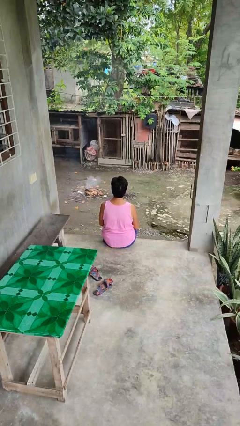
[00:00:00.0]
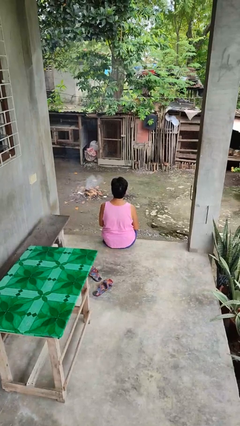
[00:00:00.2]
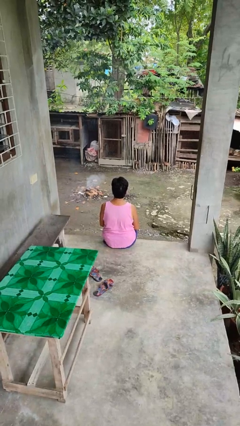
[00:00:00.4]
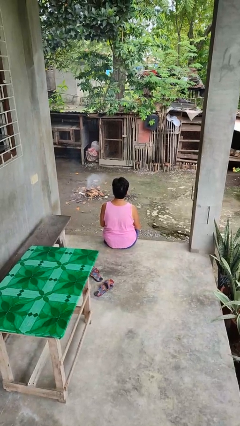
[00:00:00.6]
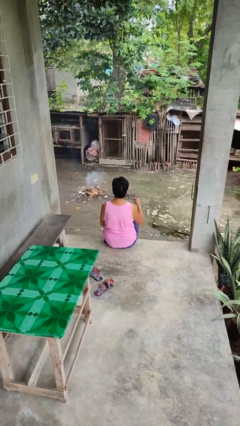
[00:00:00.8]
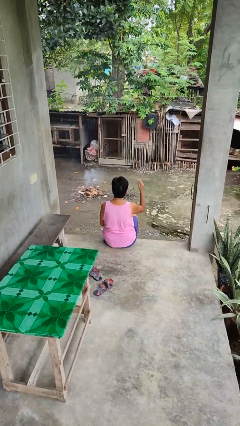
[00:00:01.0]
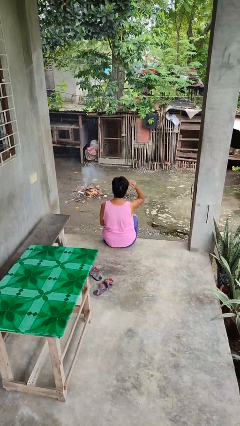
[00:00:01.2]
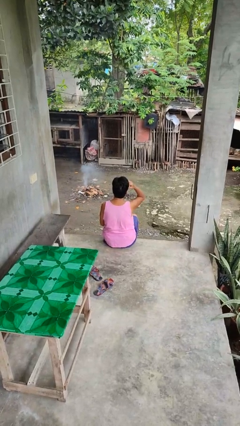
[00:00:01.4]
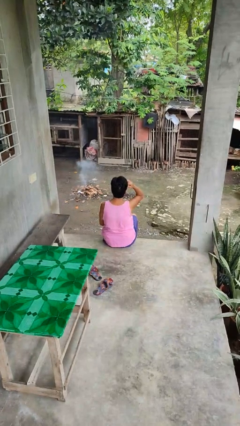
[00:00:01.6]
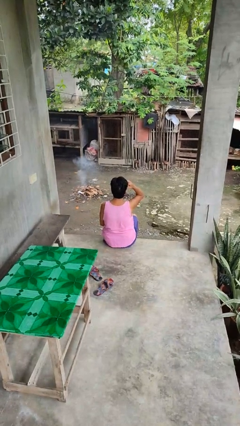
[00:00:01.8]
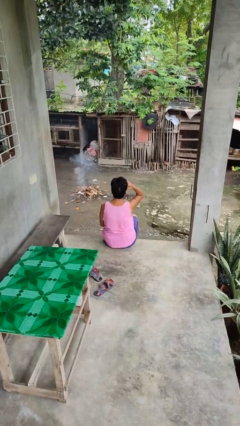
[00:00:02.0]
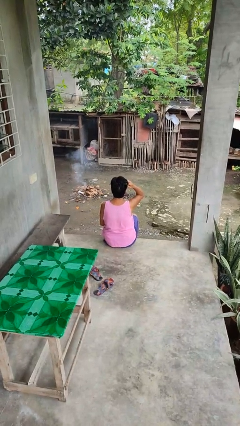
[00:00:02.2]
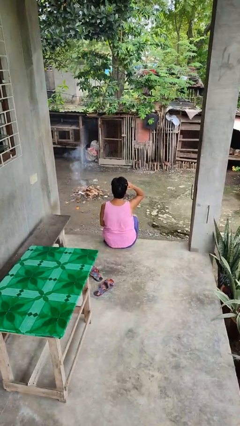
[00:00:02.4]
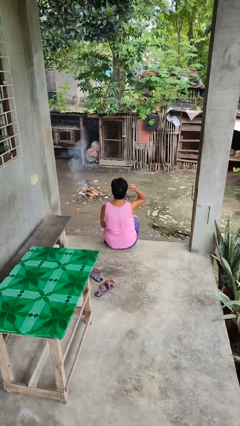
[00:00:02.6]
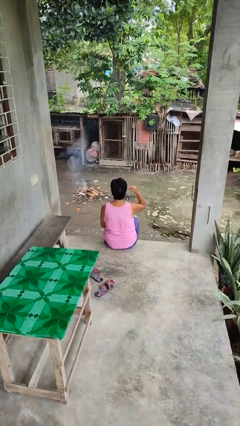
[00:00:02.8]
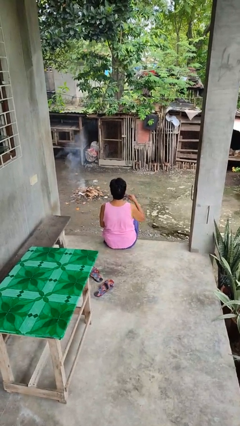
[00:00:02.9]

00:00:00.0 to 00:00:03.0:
person scratches face

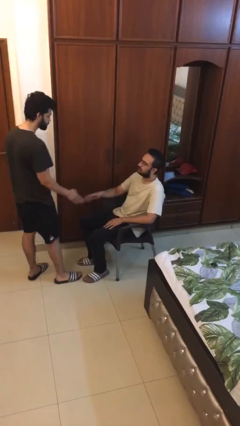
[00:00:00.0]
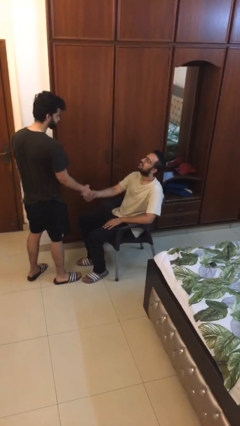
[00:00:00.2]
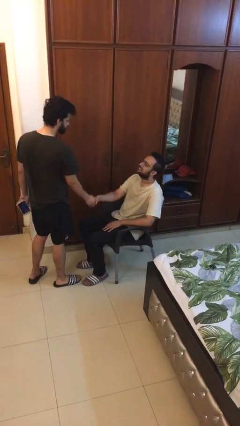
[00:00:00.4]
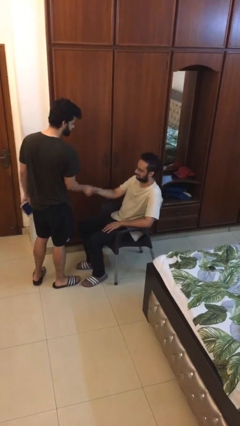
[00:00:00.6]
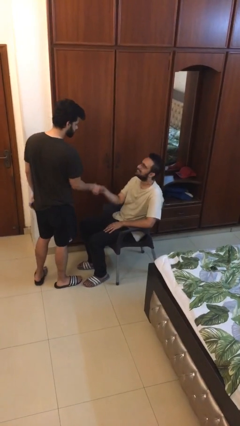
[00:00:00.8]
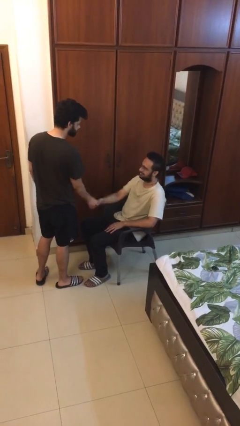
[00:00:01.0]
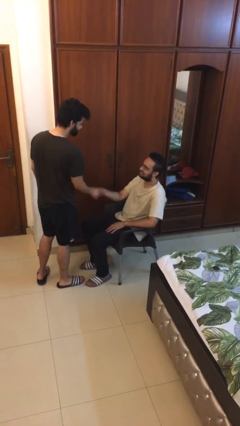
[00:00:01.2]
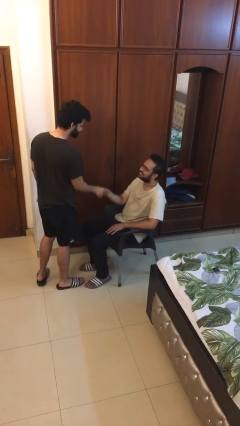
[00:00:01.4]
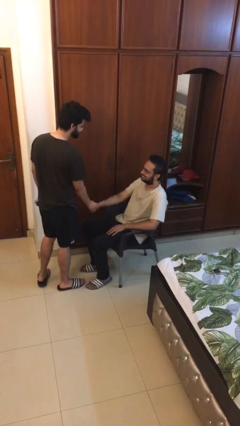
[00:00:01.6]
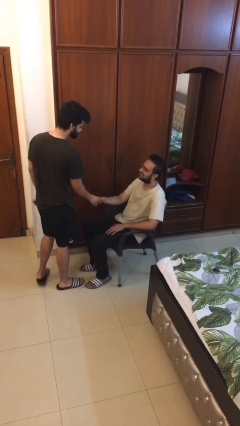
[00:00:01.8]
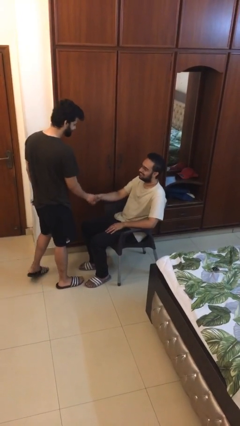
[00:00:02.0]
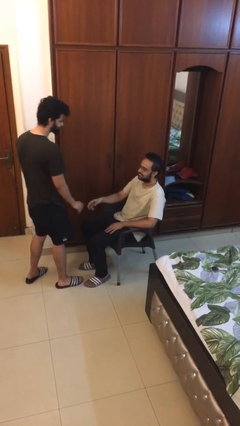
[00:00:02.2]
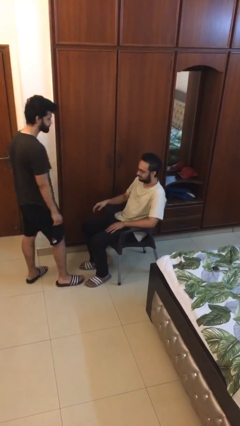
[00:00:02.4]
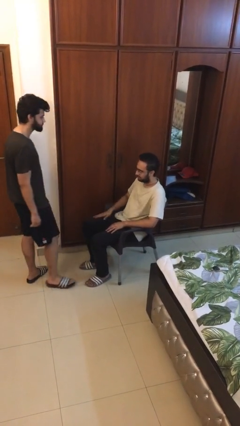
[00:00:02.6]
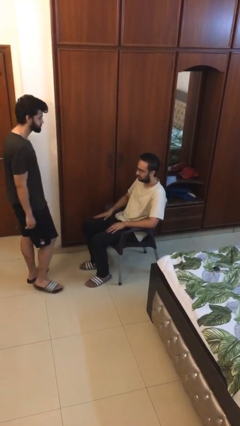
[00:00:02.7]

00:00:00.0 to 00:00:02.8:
person shakes hand

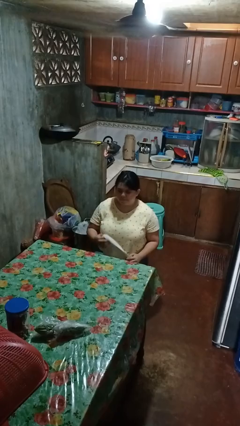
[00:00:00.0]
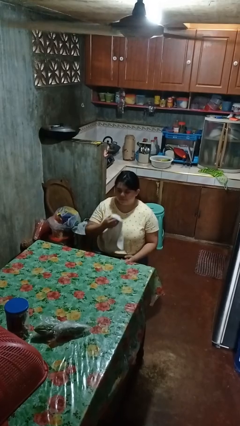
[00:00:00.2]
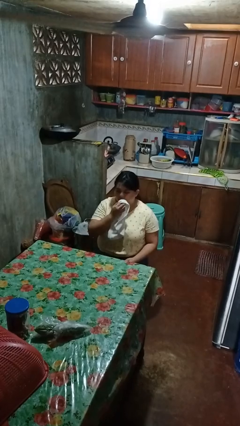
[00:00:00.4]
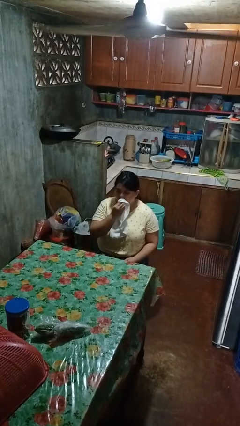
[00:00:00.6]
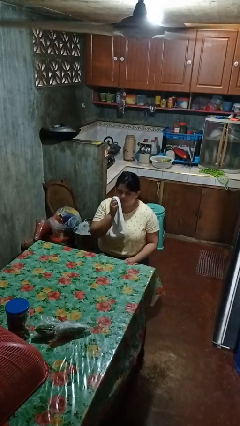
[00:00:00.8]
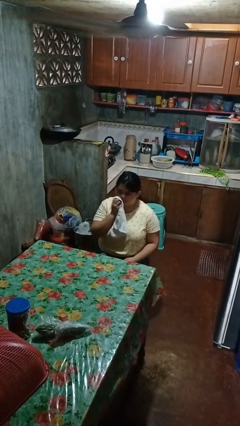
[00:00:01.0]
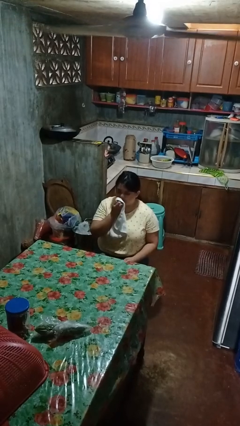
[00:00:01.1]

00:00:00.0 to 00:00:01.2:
person wipes mouth with napkin

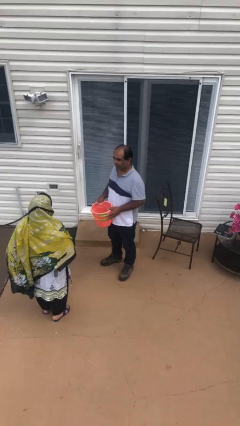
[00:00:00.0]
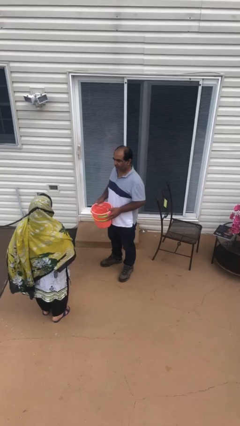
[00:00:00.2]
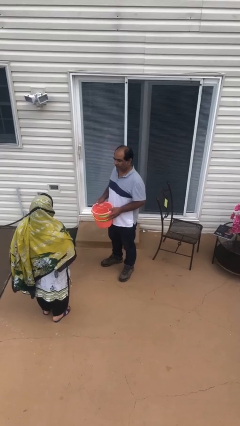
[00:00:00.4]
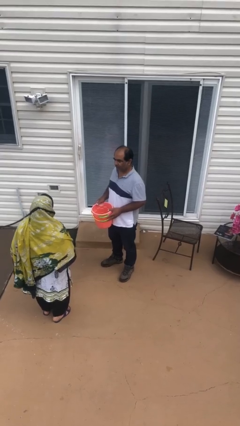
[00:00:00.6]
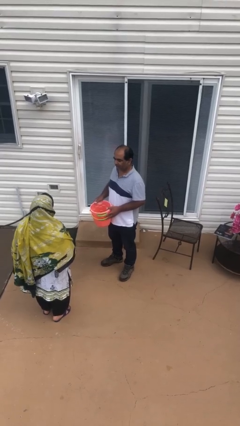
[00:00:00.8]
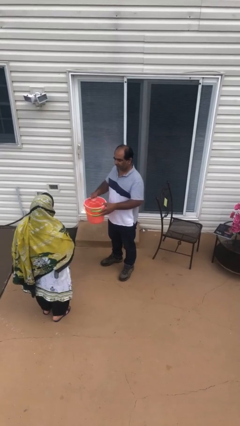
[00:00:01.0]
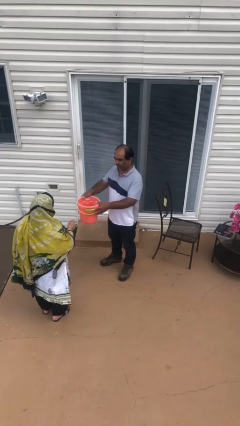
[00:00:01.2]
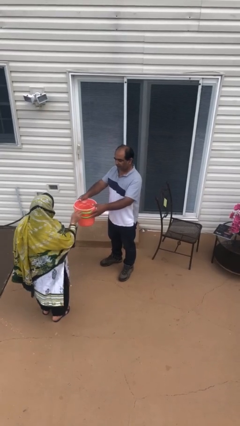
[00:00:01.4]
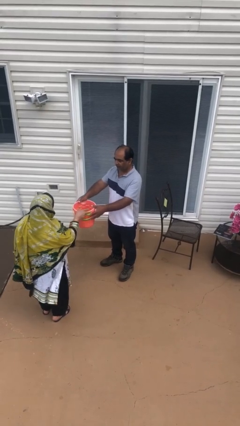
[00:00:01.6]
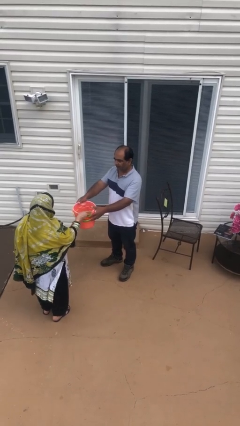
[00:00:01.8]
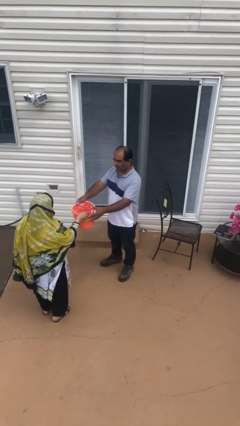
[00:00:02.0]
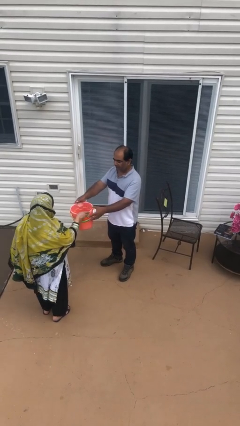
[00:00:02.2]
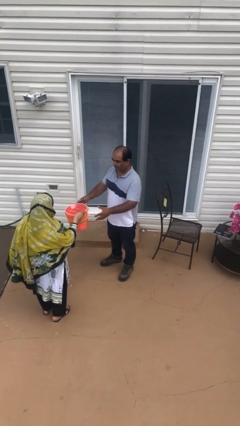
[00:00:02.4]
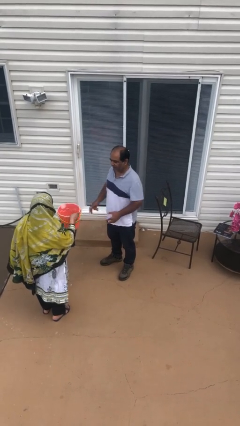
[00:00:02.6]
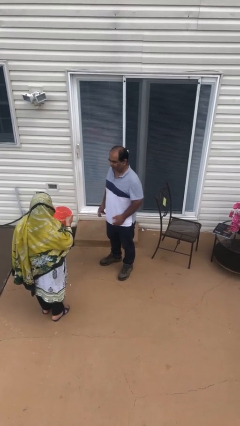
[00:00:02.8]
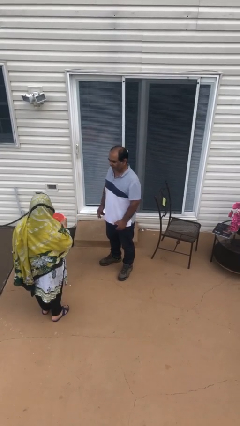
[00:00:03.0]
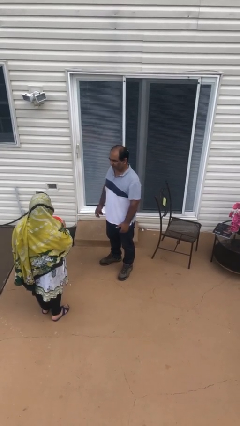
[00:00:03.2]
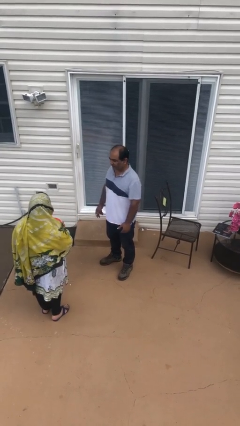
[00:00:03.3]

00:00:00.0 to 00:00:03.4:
person transfers object to person

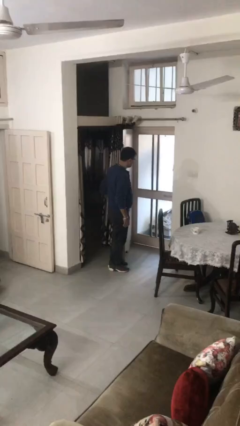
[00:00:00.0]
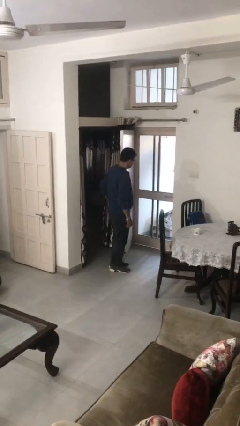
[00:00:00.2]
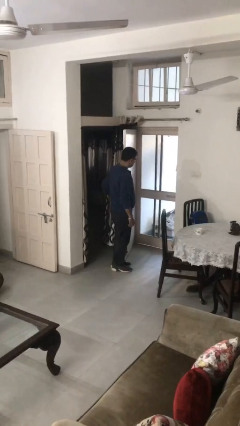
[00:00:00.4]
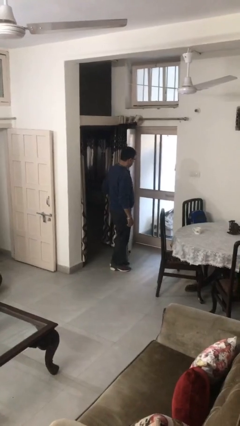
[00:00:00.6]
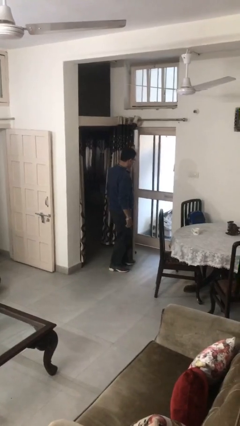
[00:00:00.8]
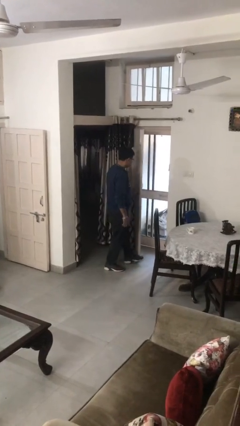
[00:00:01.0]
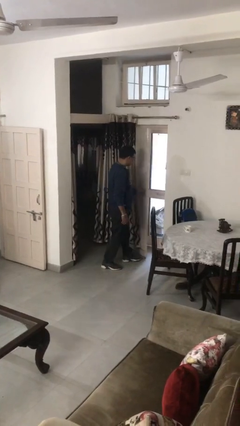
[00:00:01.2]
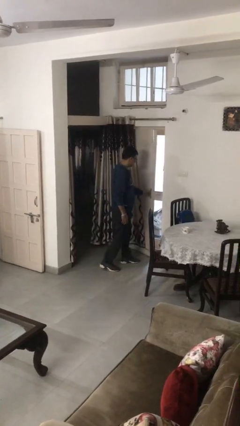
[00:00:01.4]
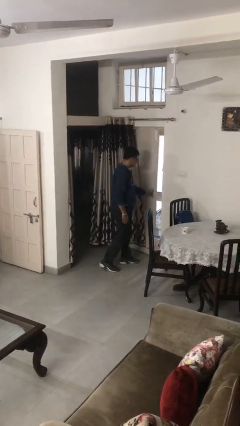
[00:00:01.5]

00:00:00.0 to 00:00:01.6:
person closes facility door

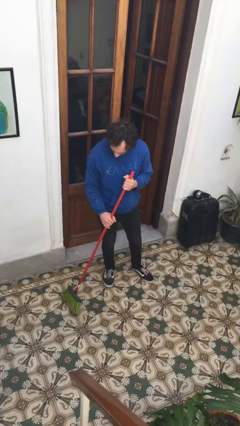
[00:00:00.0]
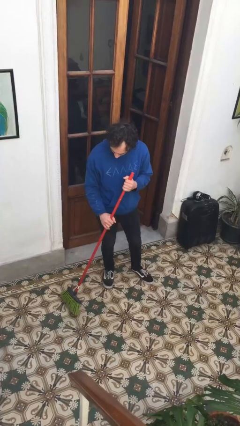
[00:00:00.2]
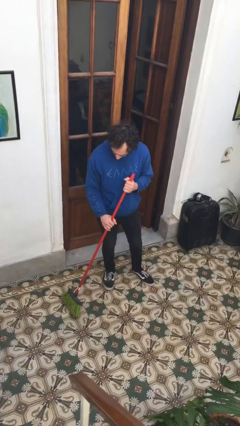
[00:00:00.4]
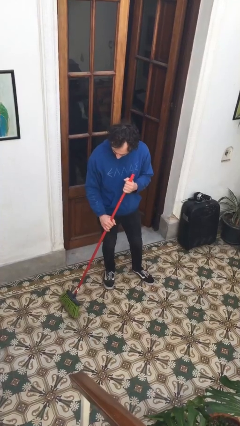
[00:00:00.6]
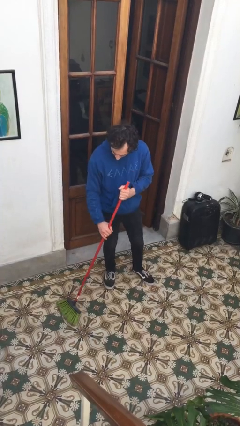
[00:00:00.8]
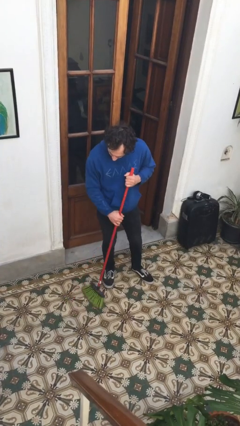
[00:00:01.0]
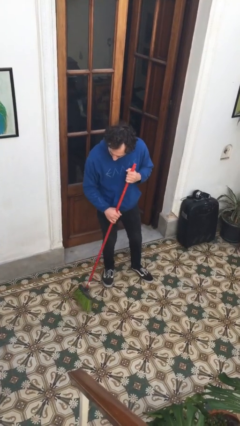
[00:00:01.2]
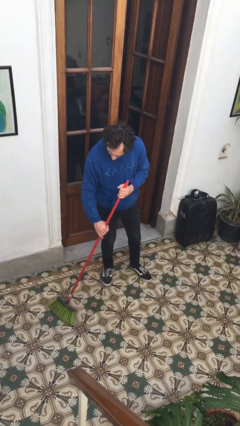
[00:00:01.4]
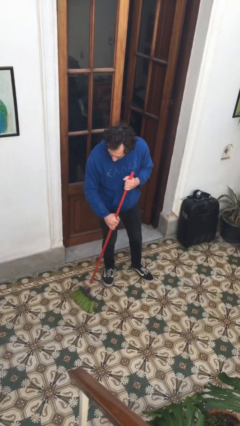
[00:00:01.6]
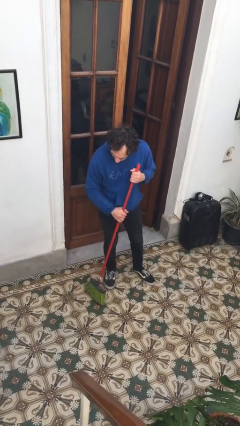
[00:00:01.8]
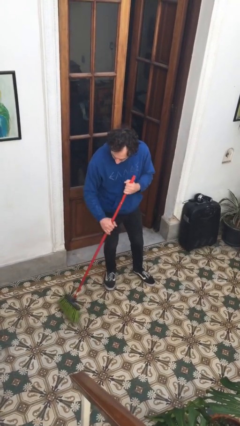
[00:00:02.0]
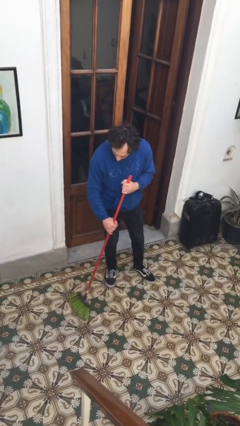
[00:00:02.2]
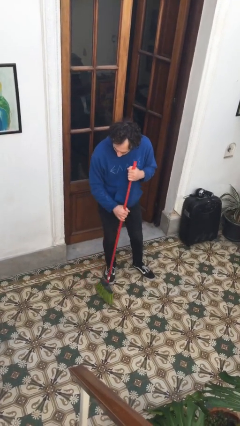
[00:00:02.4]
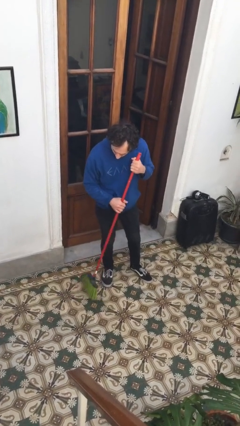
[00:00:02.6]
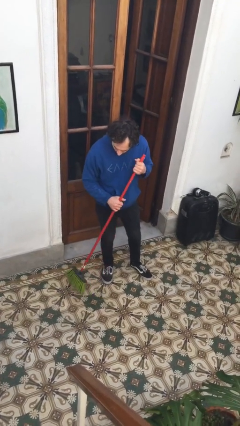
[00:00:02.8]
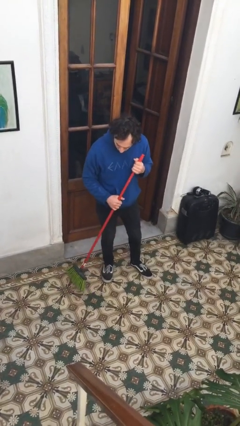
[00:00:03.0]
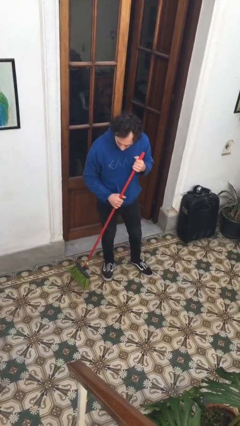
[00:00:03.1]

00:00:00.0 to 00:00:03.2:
person sweeps floor

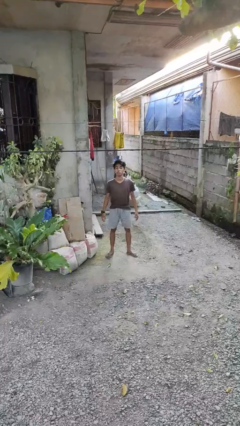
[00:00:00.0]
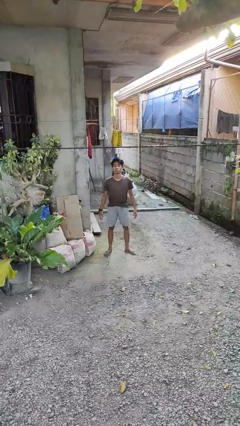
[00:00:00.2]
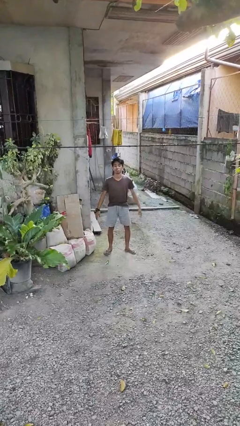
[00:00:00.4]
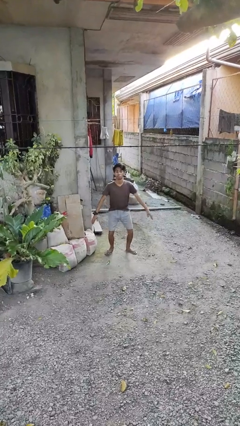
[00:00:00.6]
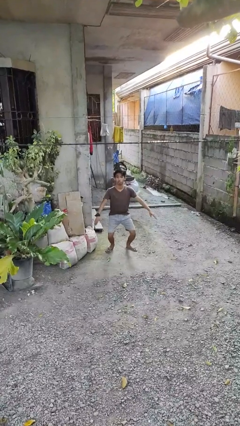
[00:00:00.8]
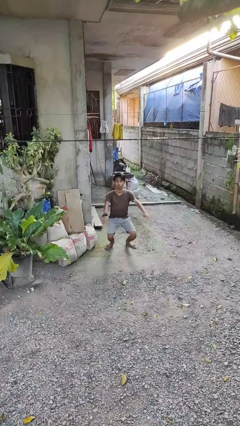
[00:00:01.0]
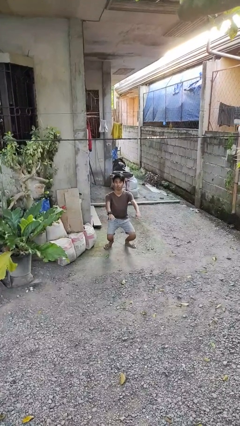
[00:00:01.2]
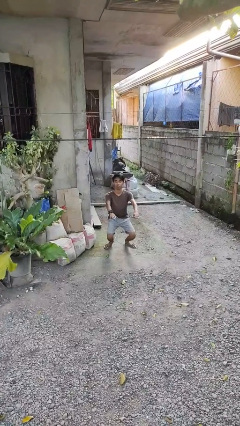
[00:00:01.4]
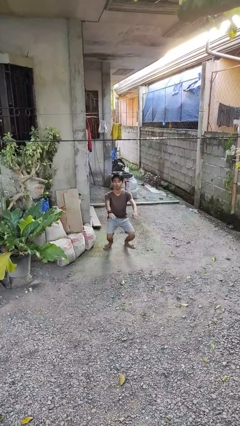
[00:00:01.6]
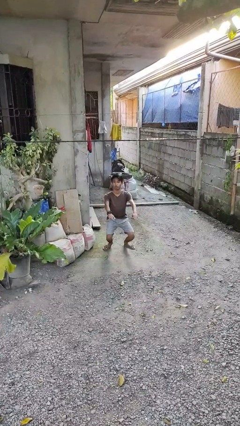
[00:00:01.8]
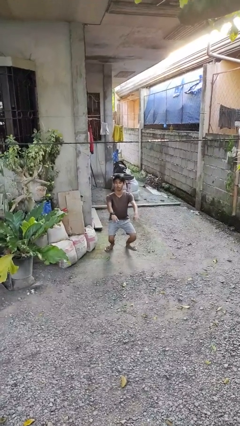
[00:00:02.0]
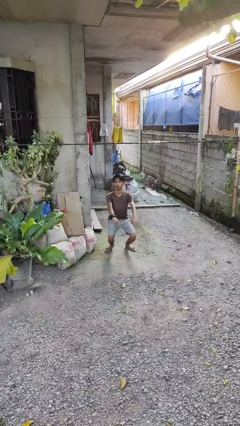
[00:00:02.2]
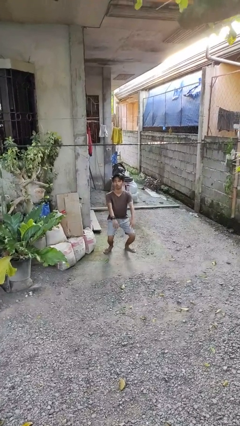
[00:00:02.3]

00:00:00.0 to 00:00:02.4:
person squats
